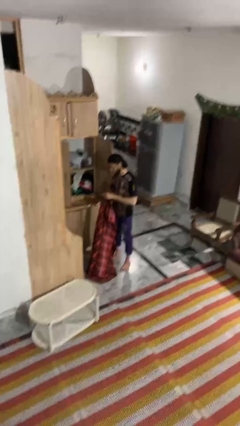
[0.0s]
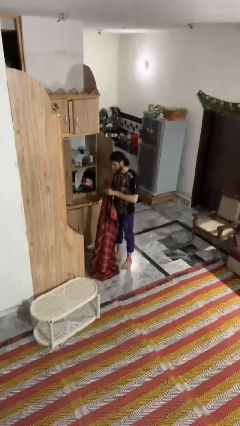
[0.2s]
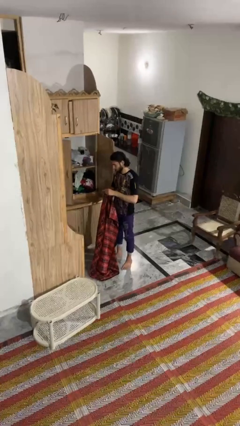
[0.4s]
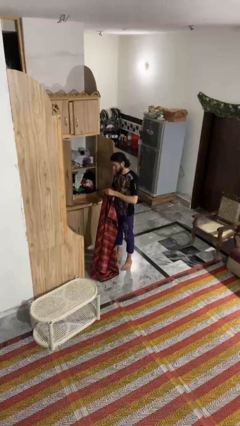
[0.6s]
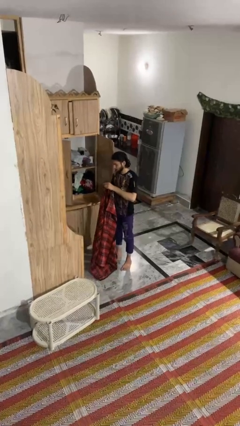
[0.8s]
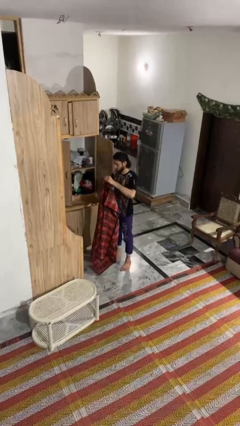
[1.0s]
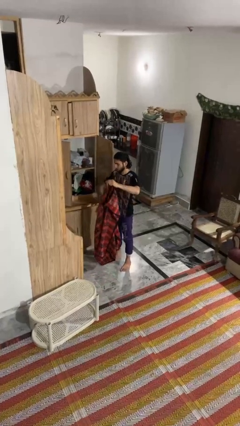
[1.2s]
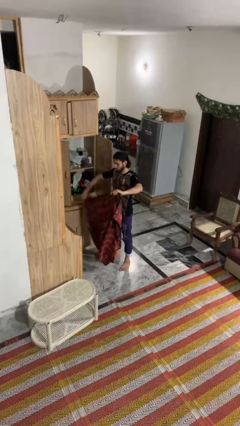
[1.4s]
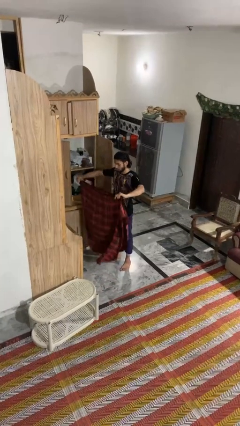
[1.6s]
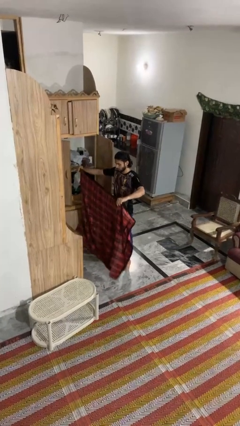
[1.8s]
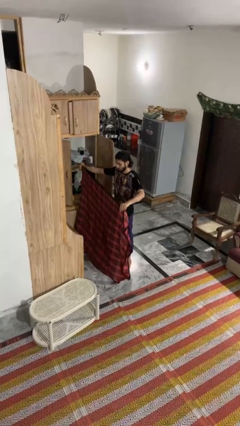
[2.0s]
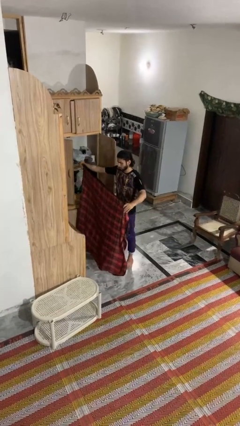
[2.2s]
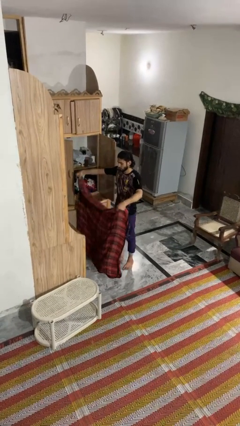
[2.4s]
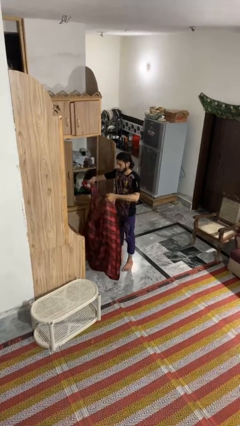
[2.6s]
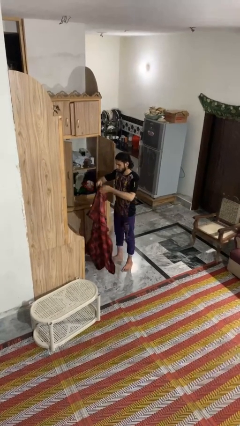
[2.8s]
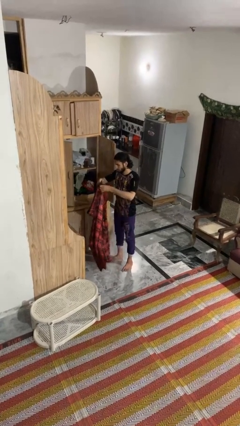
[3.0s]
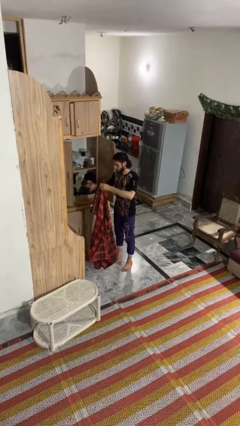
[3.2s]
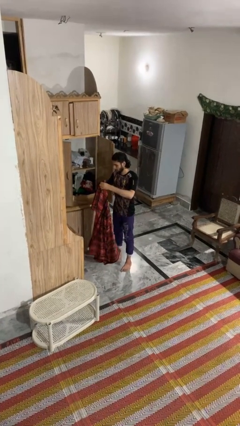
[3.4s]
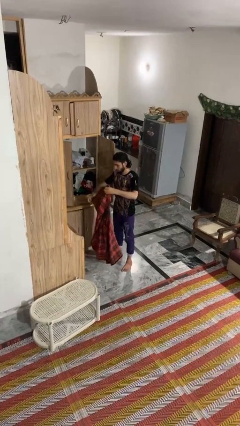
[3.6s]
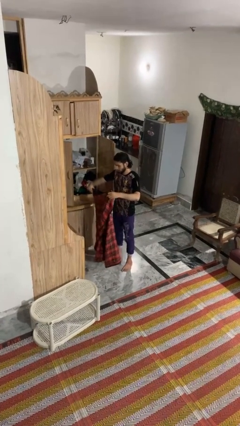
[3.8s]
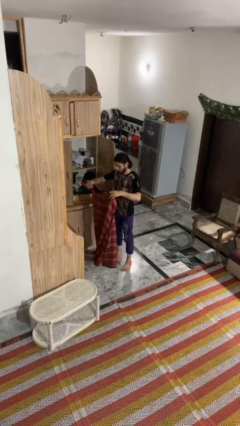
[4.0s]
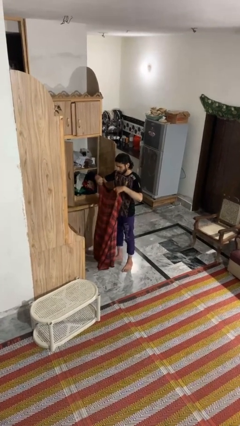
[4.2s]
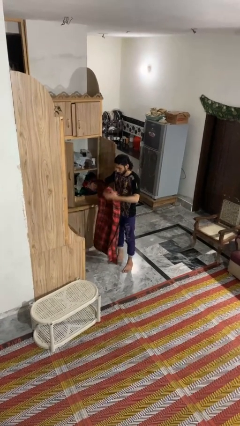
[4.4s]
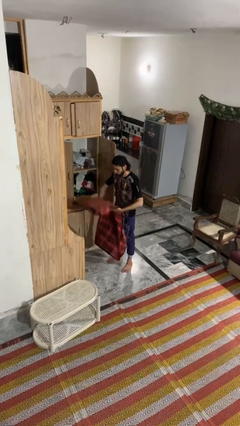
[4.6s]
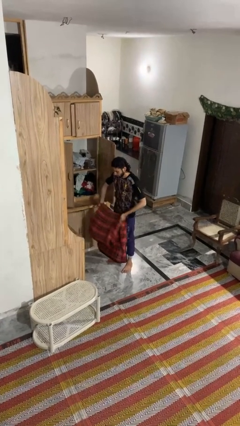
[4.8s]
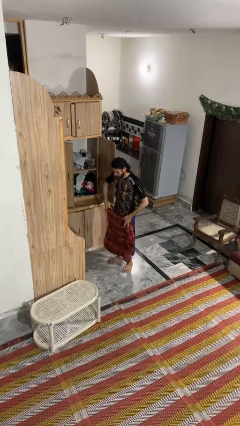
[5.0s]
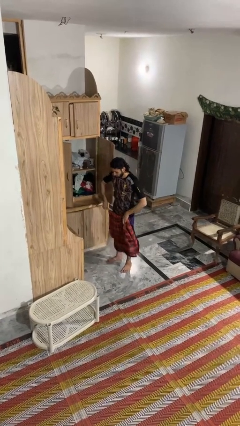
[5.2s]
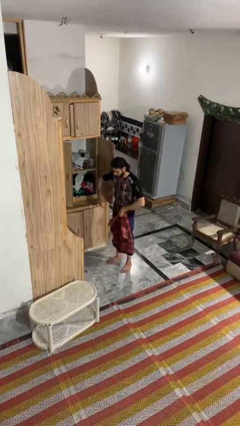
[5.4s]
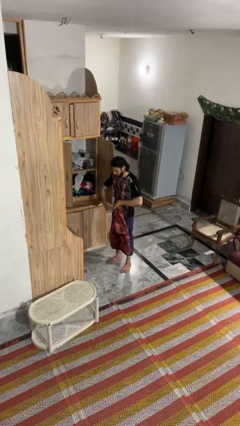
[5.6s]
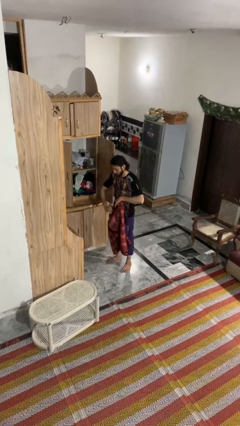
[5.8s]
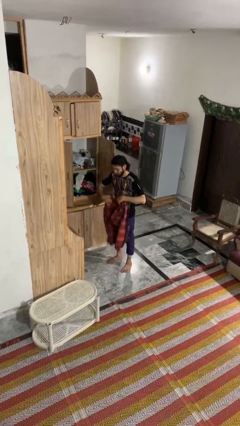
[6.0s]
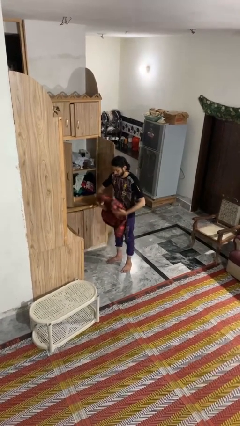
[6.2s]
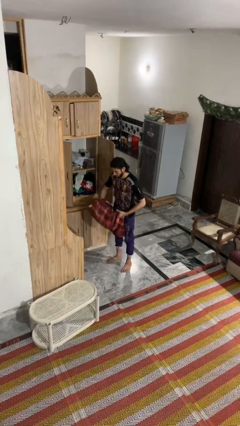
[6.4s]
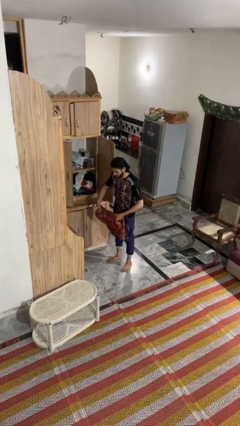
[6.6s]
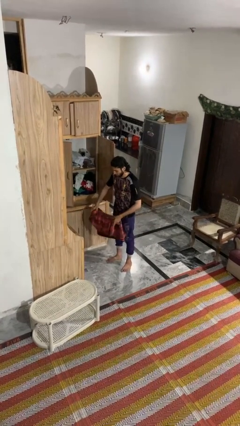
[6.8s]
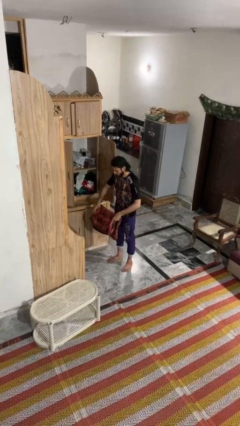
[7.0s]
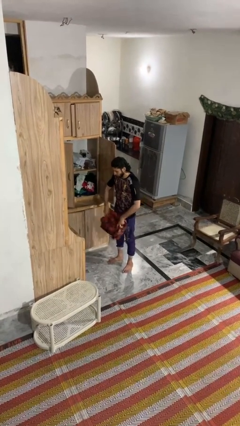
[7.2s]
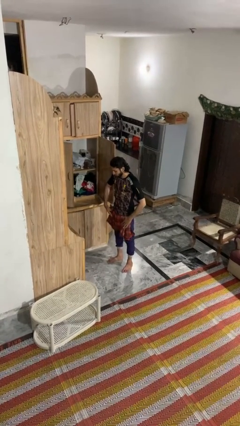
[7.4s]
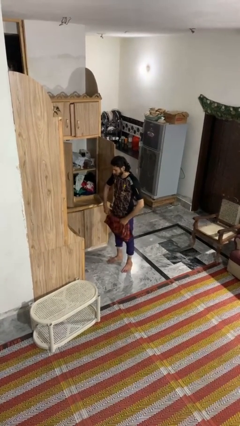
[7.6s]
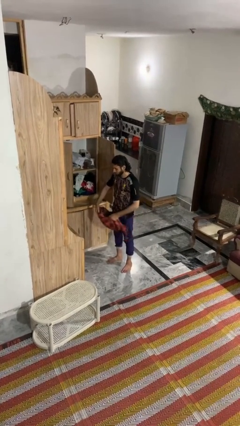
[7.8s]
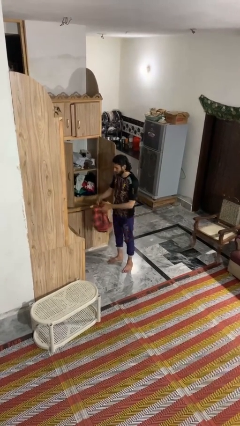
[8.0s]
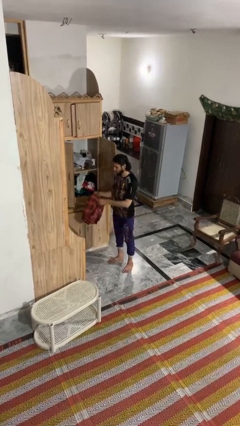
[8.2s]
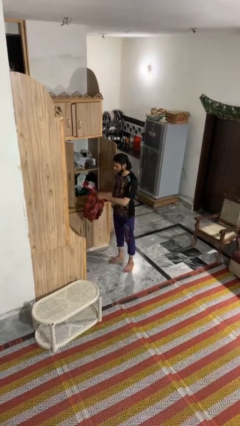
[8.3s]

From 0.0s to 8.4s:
person folds blanket

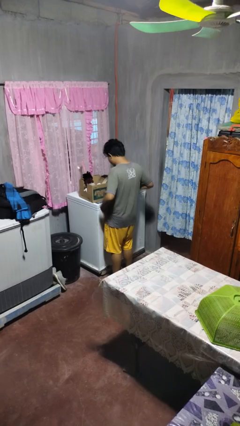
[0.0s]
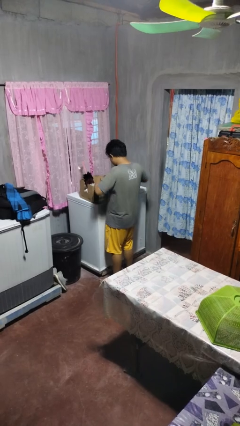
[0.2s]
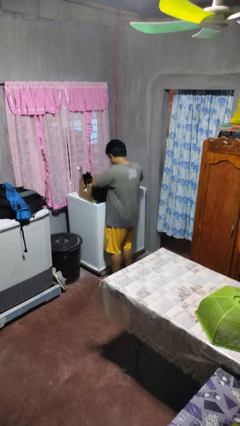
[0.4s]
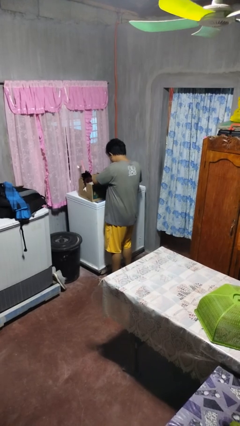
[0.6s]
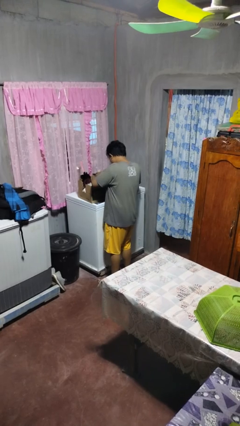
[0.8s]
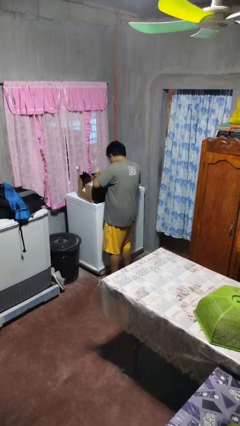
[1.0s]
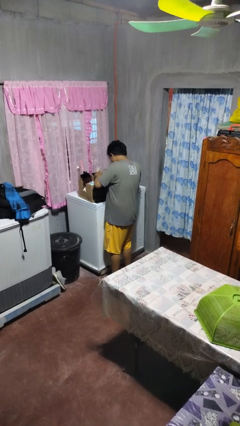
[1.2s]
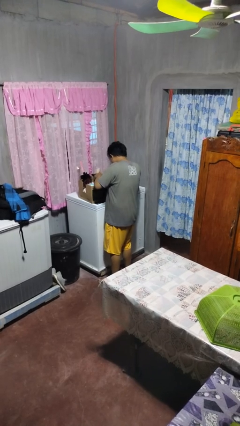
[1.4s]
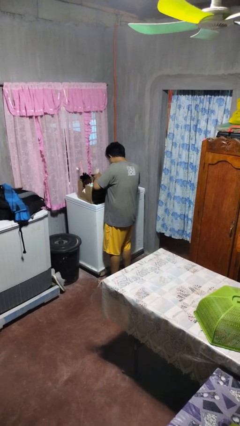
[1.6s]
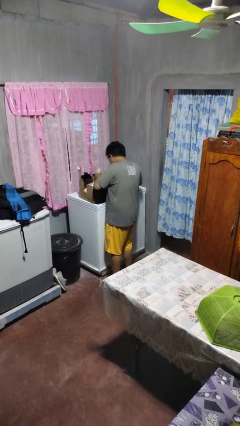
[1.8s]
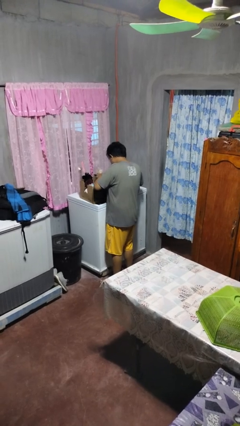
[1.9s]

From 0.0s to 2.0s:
person searches in box

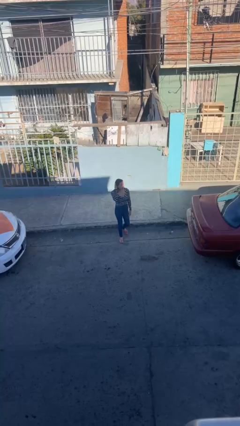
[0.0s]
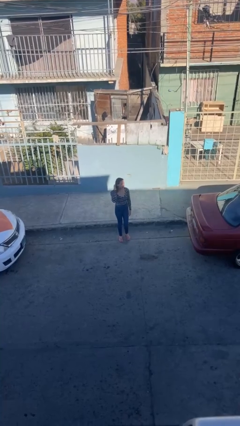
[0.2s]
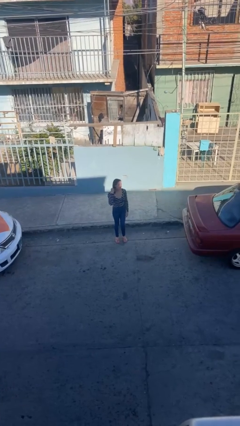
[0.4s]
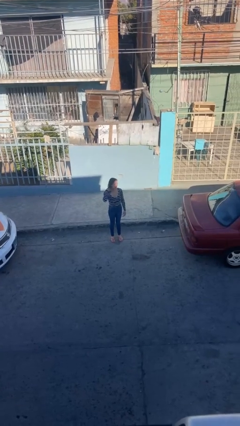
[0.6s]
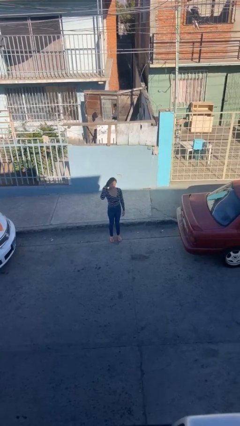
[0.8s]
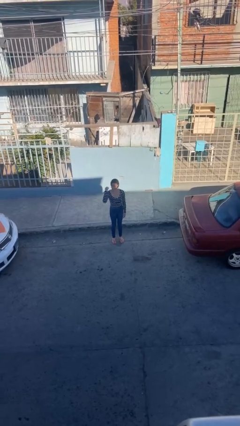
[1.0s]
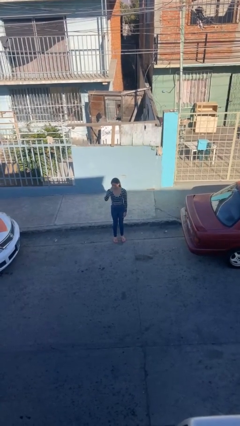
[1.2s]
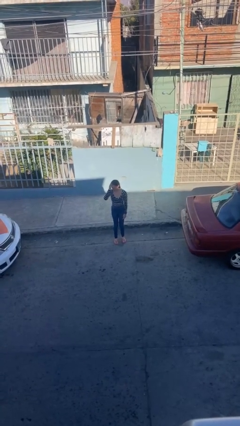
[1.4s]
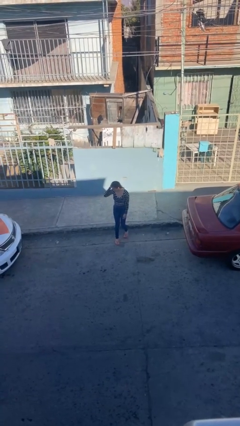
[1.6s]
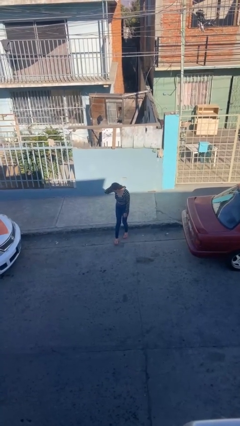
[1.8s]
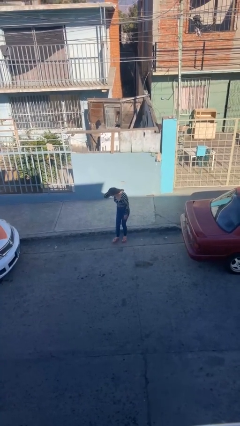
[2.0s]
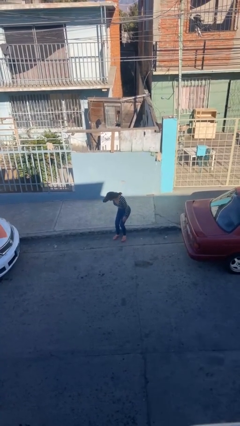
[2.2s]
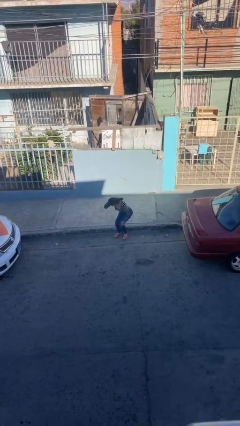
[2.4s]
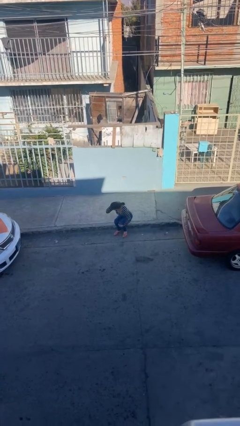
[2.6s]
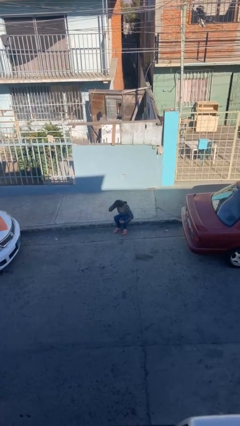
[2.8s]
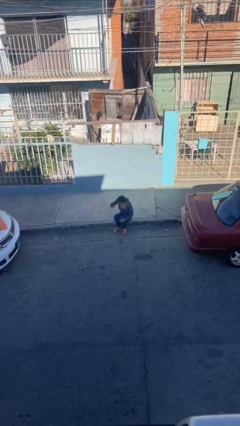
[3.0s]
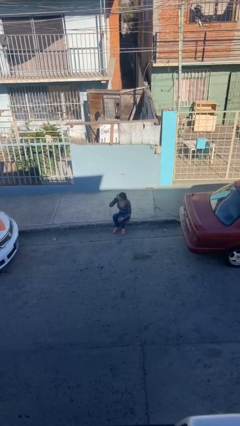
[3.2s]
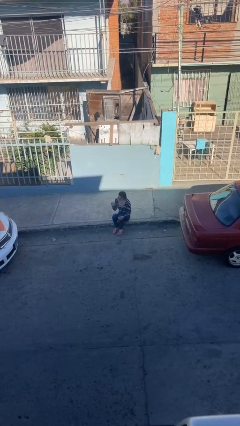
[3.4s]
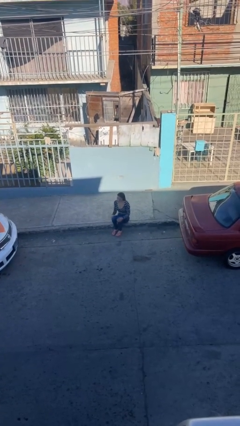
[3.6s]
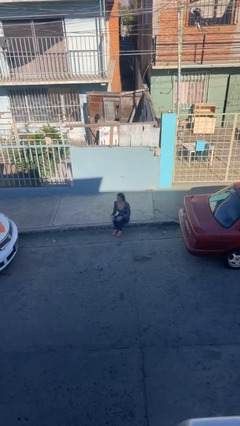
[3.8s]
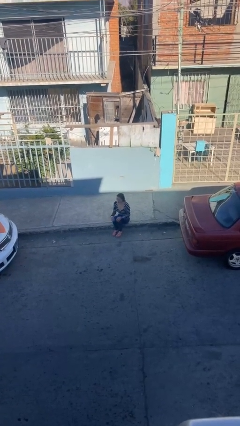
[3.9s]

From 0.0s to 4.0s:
person sits down

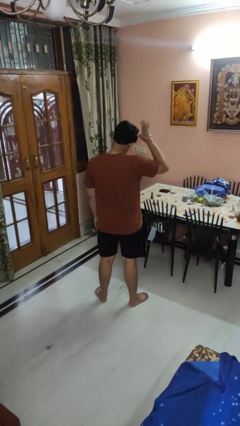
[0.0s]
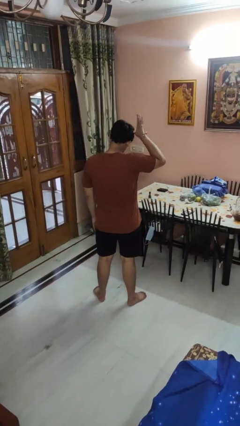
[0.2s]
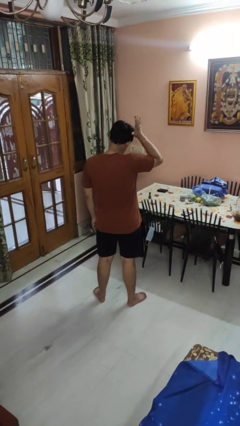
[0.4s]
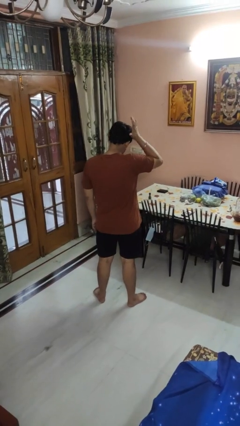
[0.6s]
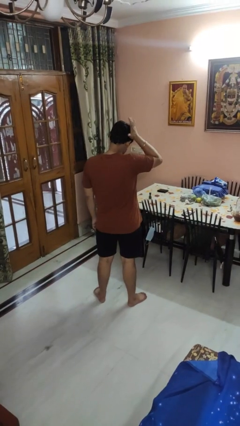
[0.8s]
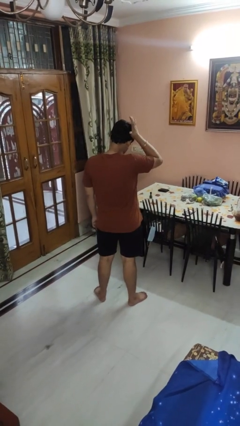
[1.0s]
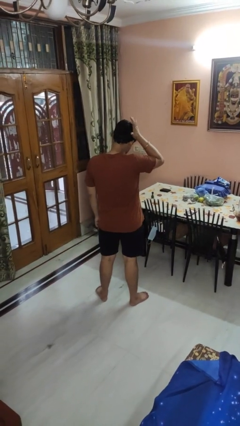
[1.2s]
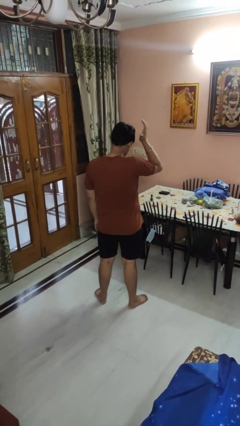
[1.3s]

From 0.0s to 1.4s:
person pats head

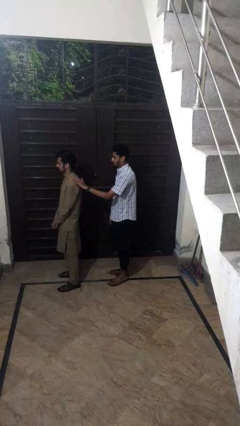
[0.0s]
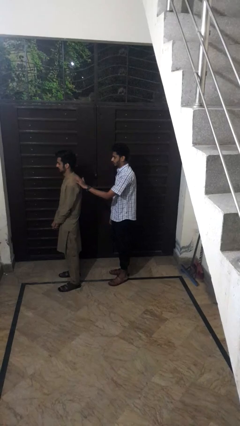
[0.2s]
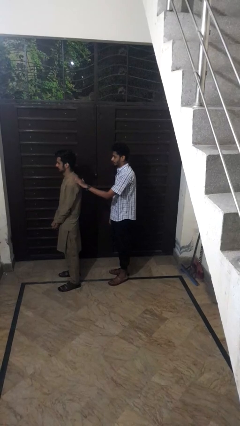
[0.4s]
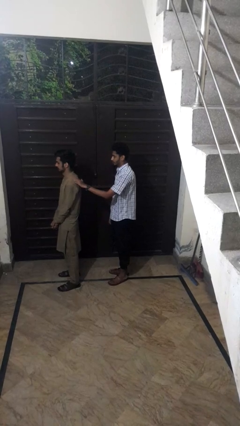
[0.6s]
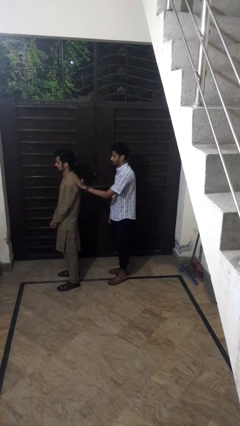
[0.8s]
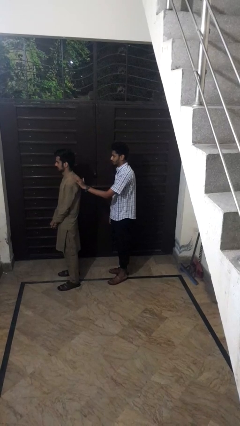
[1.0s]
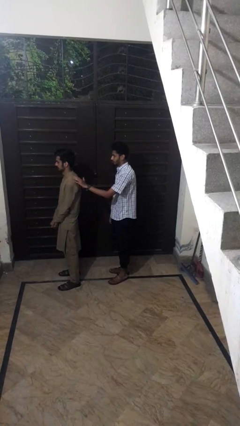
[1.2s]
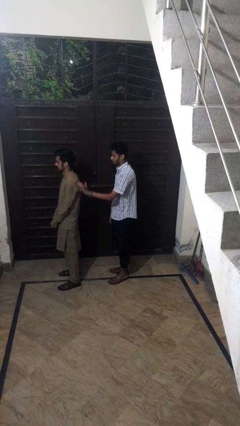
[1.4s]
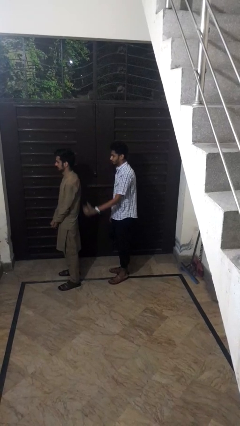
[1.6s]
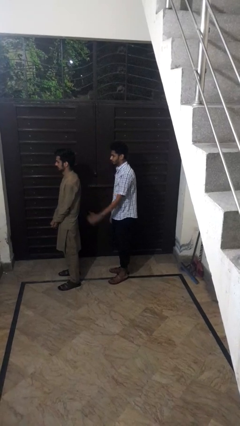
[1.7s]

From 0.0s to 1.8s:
person touches back of person
